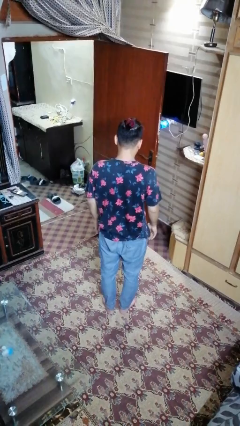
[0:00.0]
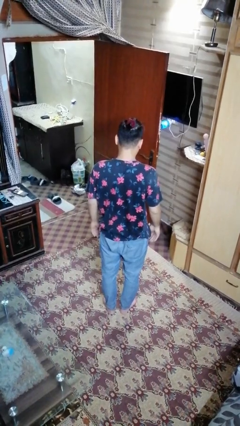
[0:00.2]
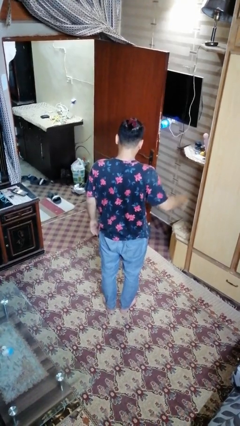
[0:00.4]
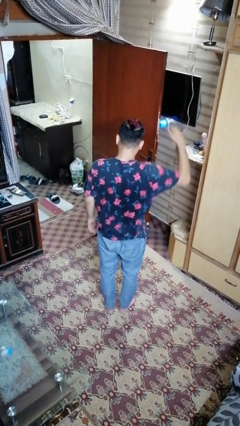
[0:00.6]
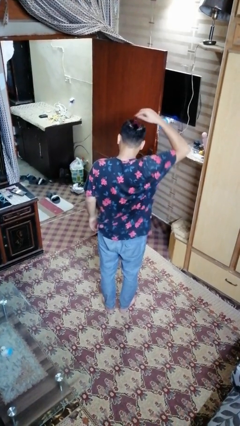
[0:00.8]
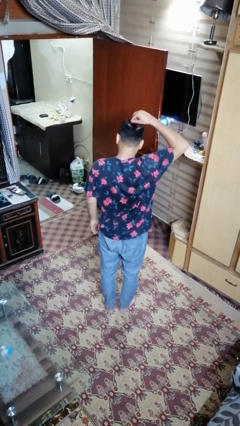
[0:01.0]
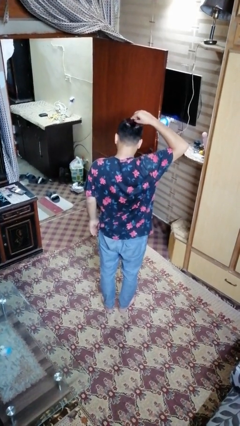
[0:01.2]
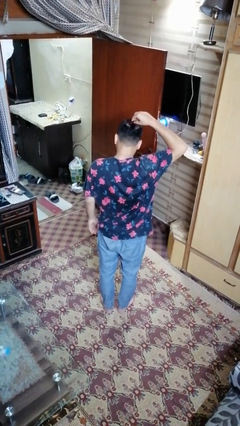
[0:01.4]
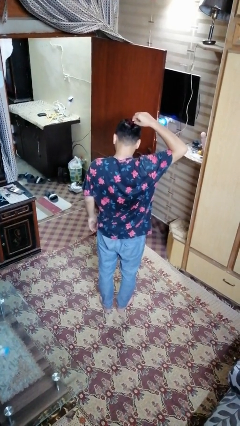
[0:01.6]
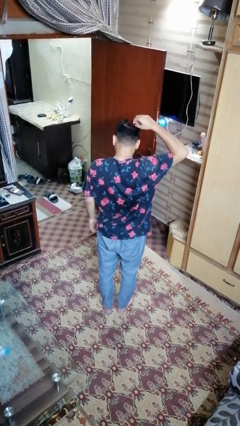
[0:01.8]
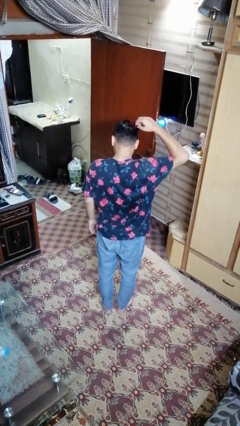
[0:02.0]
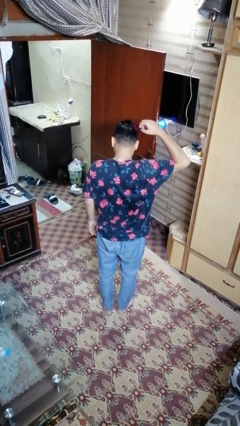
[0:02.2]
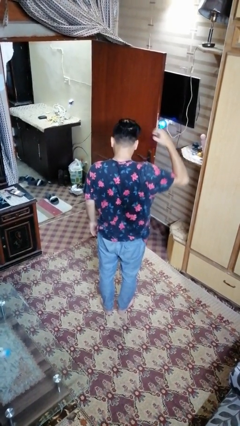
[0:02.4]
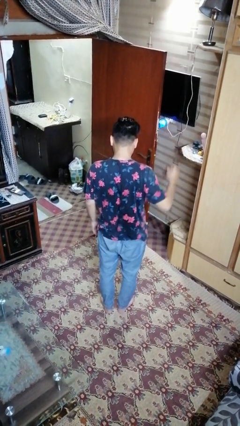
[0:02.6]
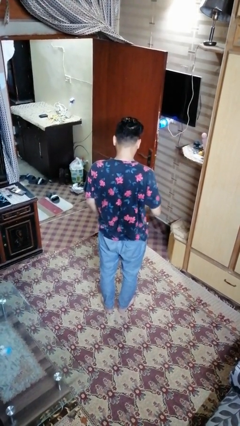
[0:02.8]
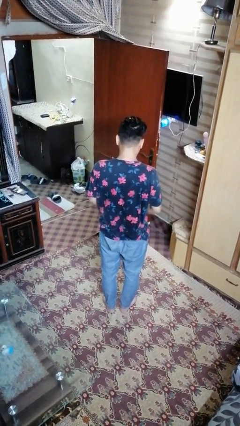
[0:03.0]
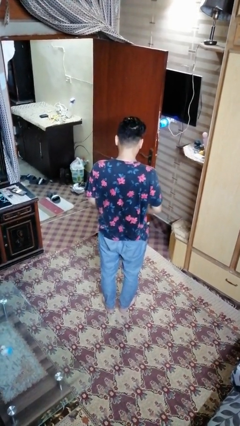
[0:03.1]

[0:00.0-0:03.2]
person takes off hairtie

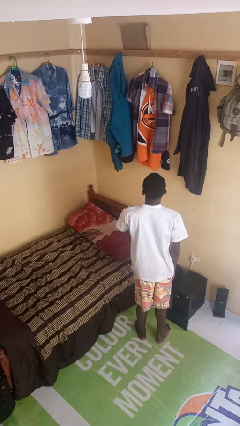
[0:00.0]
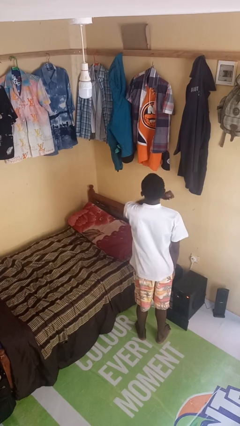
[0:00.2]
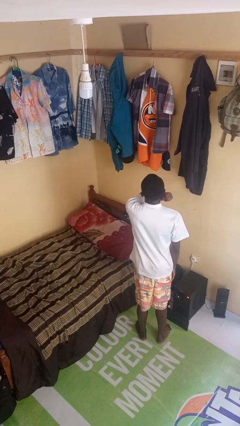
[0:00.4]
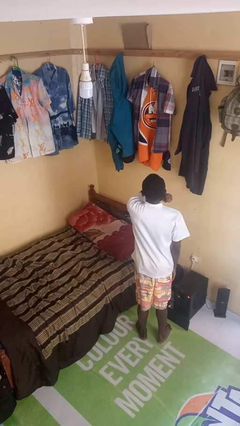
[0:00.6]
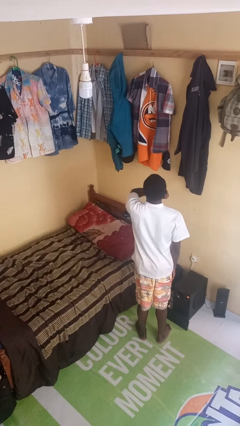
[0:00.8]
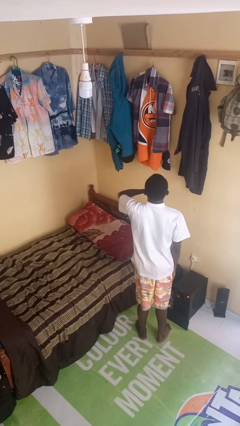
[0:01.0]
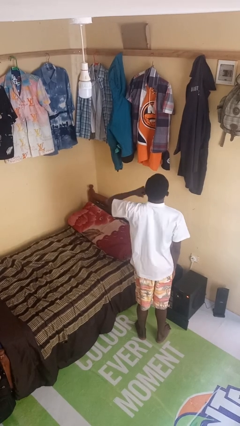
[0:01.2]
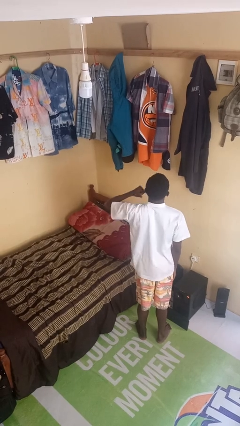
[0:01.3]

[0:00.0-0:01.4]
person gestures cut

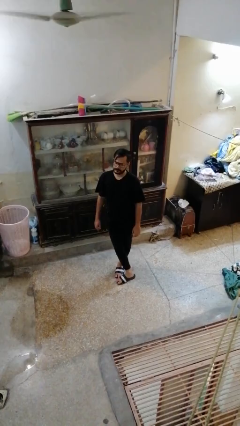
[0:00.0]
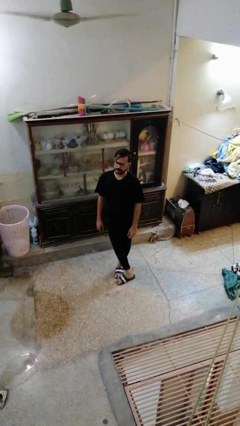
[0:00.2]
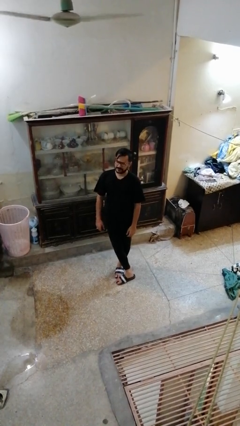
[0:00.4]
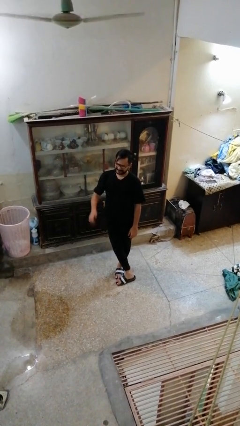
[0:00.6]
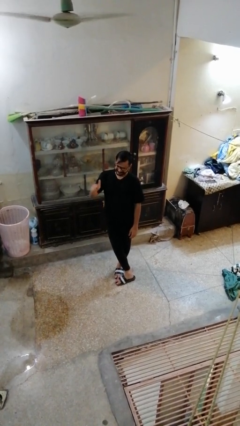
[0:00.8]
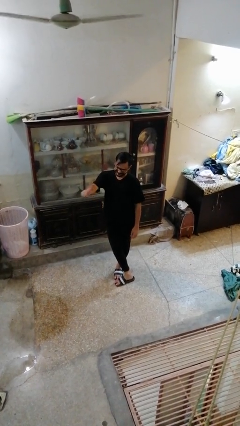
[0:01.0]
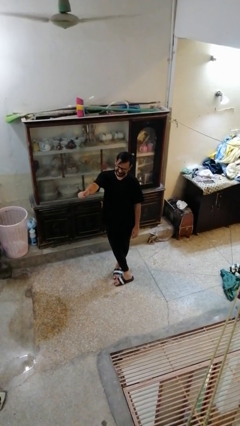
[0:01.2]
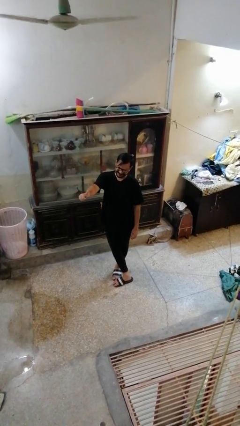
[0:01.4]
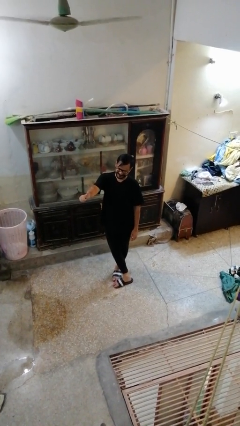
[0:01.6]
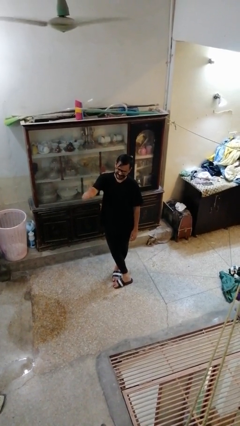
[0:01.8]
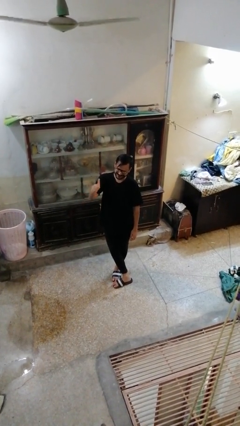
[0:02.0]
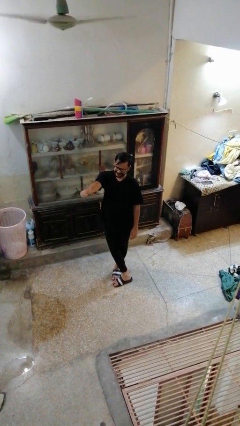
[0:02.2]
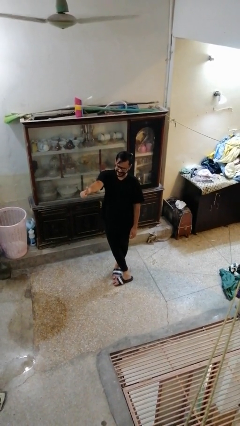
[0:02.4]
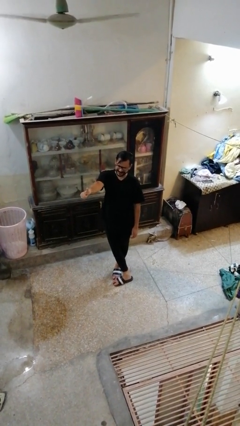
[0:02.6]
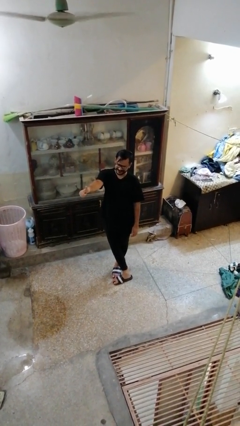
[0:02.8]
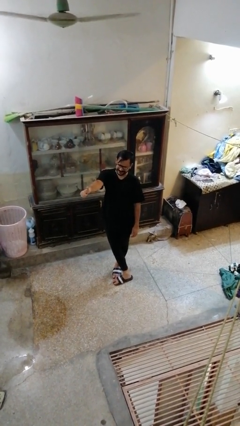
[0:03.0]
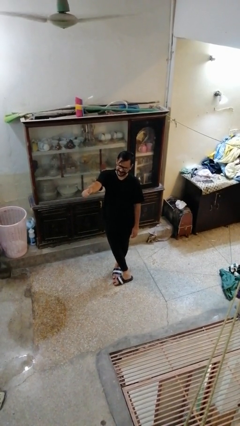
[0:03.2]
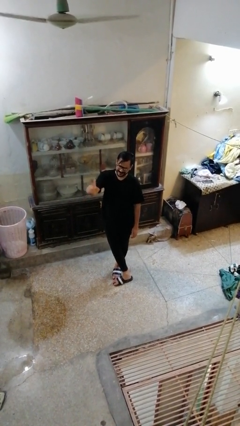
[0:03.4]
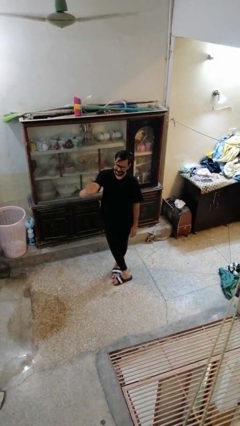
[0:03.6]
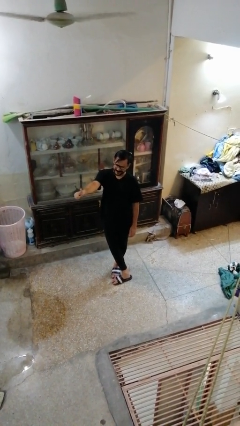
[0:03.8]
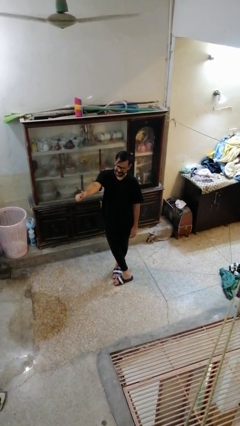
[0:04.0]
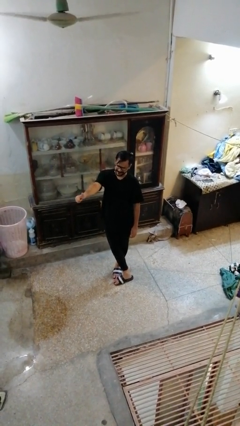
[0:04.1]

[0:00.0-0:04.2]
person gestures thumbs up

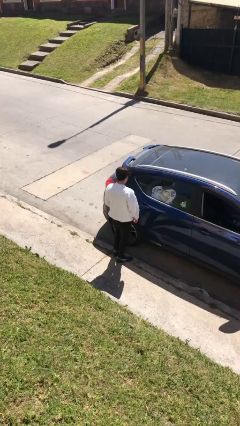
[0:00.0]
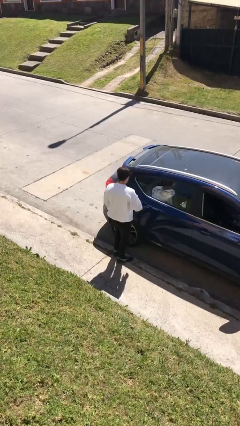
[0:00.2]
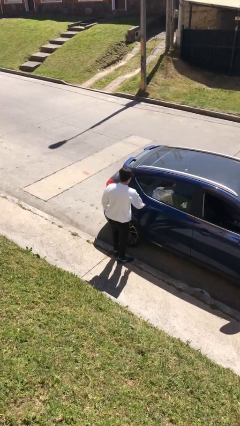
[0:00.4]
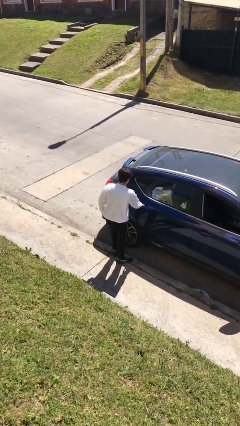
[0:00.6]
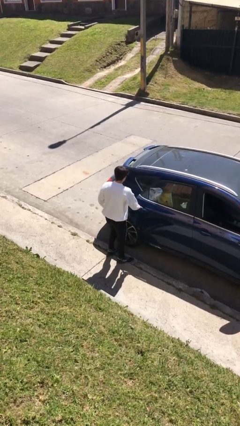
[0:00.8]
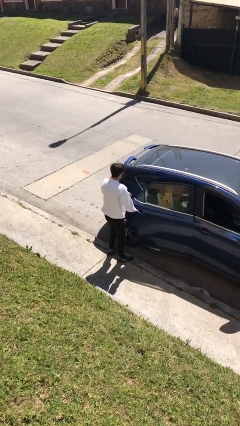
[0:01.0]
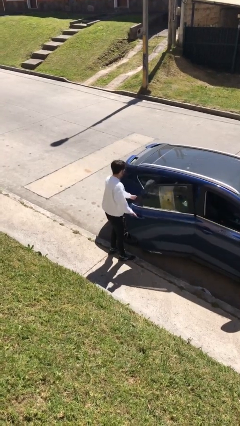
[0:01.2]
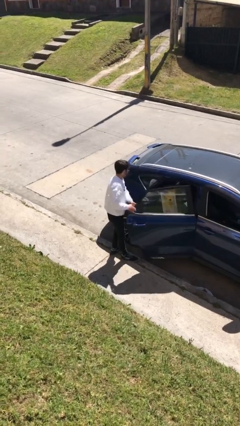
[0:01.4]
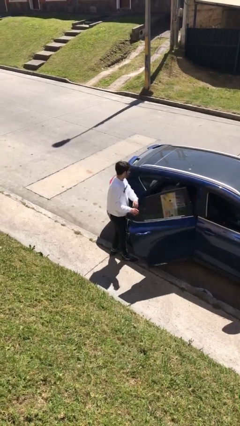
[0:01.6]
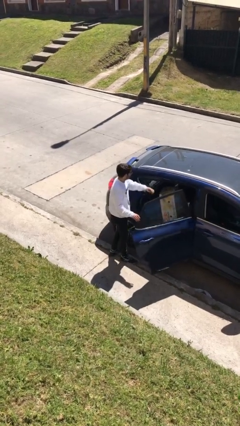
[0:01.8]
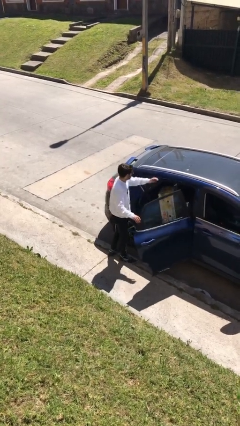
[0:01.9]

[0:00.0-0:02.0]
person opens car door

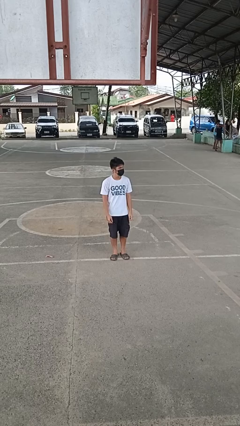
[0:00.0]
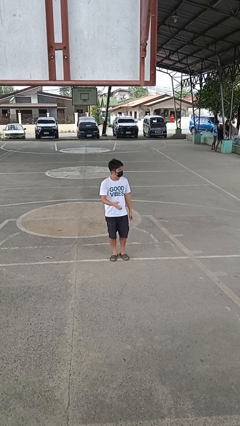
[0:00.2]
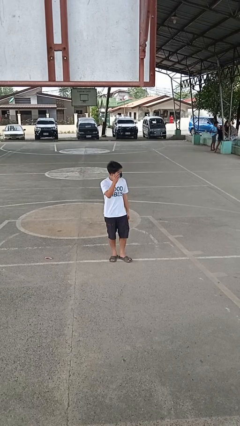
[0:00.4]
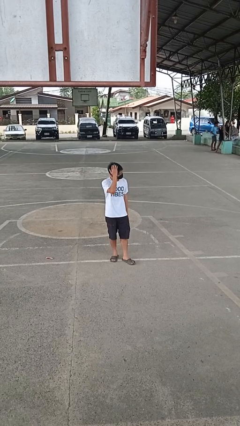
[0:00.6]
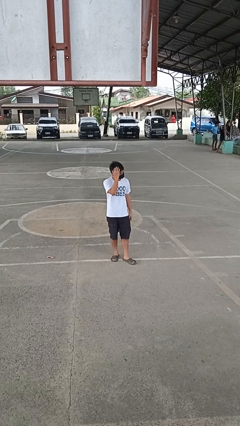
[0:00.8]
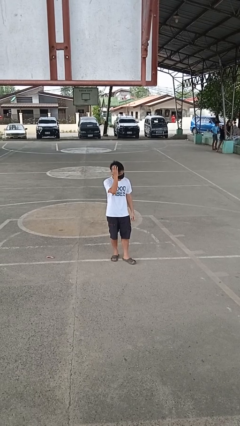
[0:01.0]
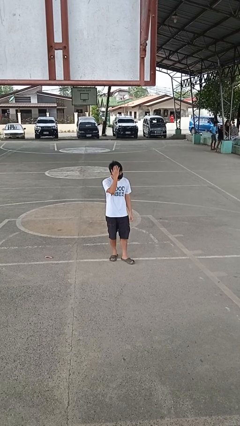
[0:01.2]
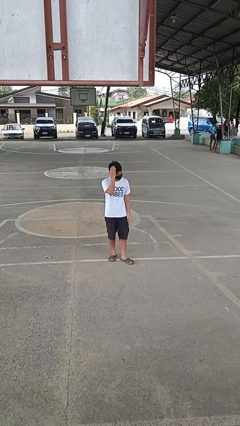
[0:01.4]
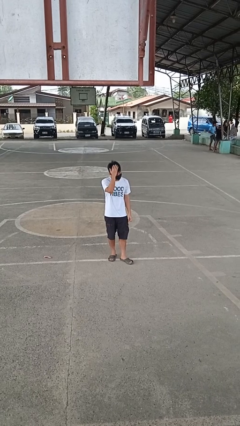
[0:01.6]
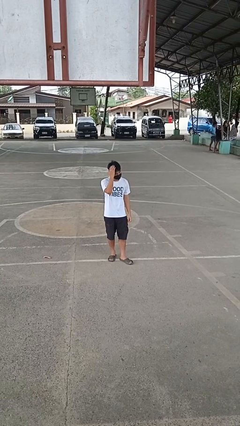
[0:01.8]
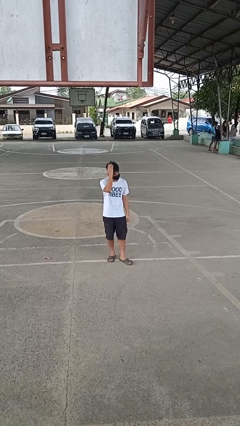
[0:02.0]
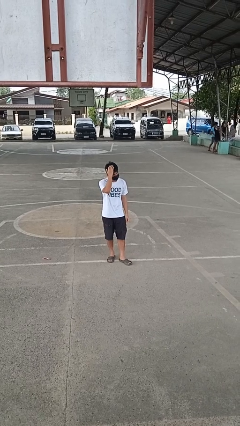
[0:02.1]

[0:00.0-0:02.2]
person pats head

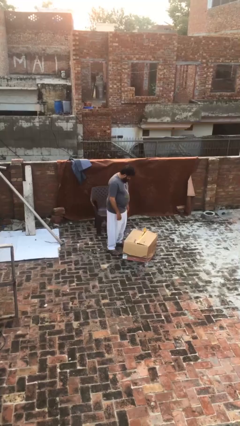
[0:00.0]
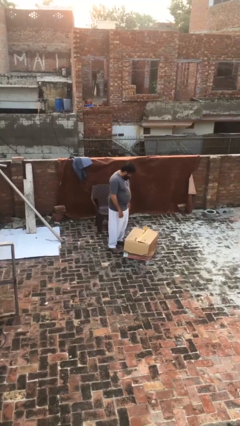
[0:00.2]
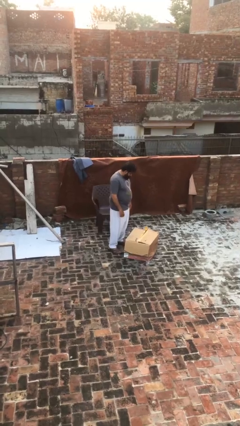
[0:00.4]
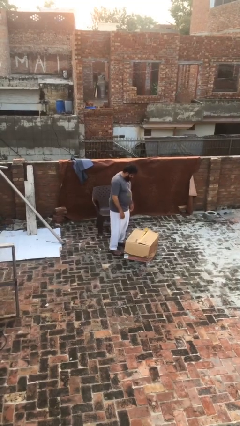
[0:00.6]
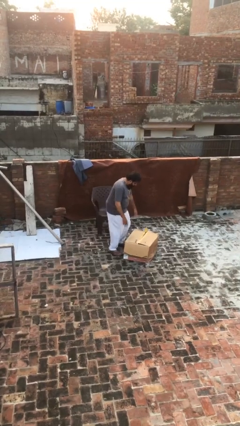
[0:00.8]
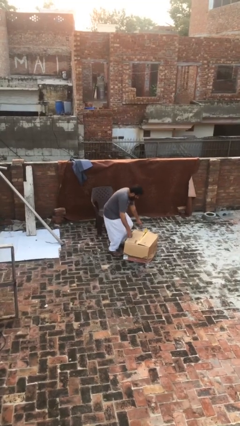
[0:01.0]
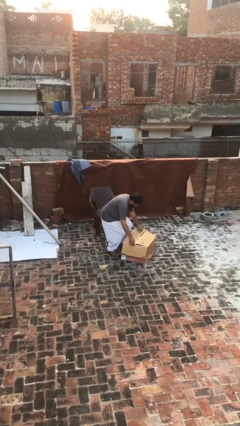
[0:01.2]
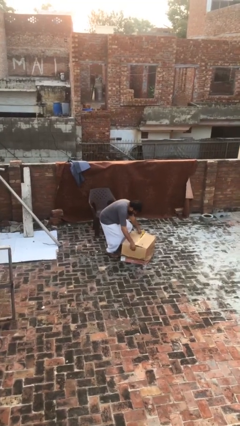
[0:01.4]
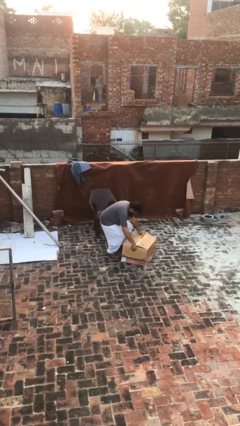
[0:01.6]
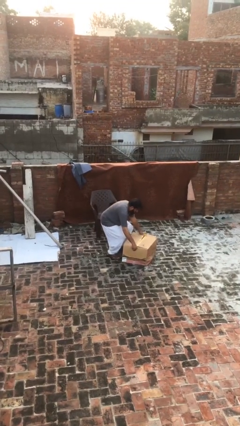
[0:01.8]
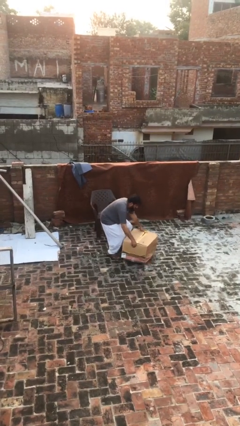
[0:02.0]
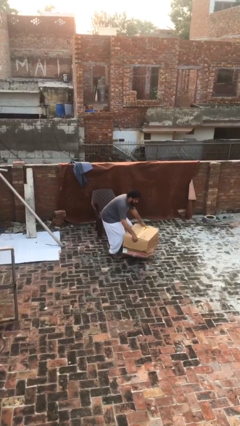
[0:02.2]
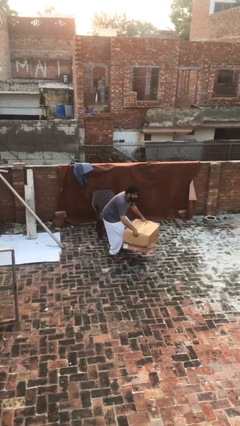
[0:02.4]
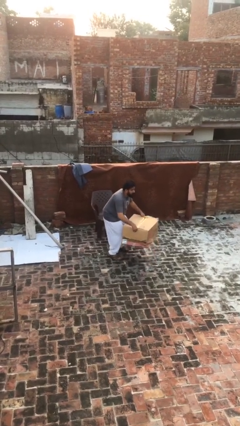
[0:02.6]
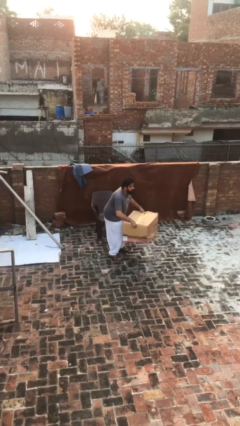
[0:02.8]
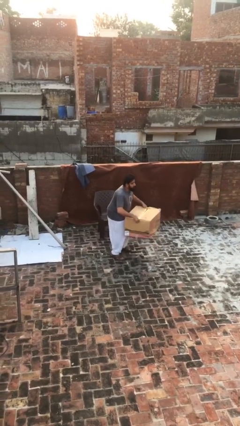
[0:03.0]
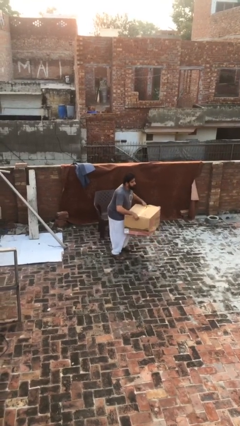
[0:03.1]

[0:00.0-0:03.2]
person picks up object from floor

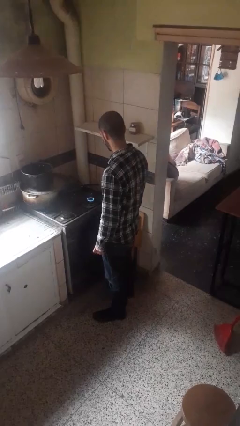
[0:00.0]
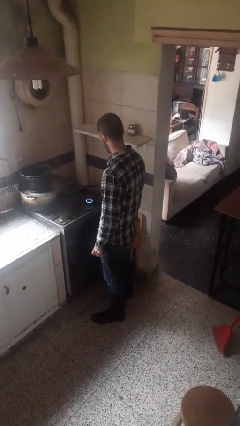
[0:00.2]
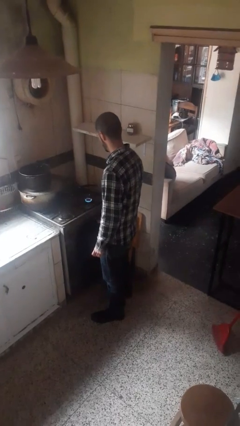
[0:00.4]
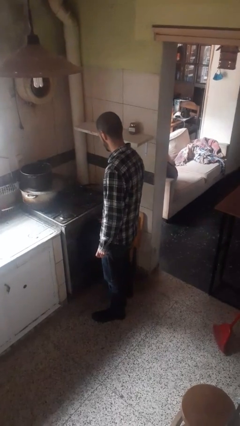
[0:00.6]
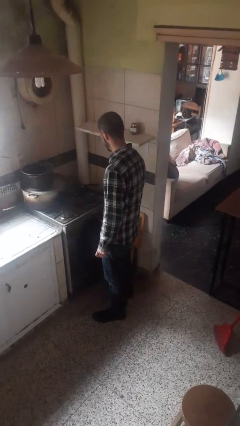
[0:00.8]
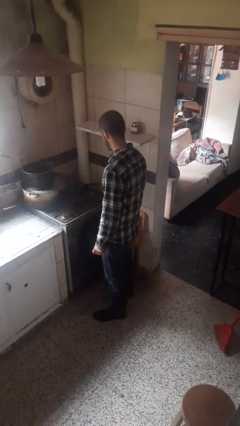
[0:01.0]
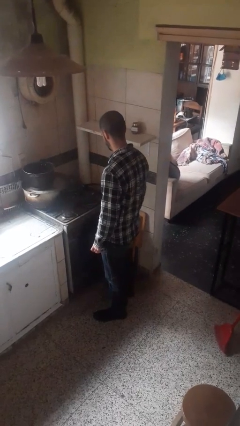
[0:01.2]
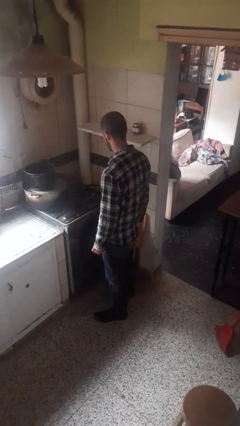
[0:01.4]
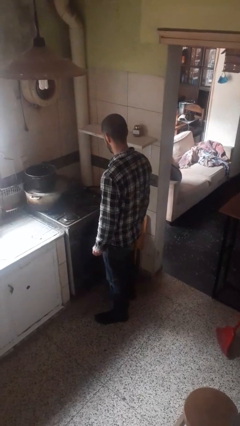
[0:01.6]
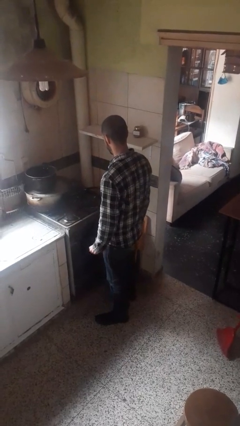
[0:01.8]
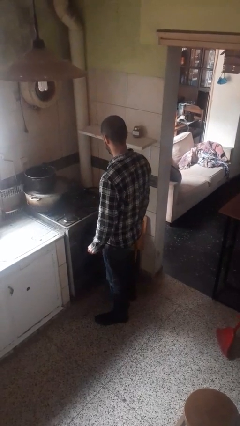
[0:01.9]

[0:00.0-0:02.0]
person turns off stovetop
